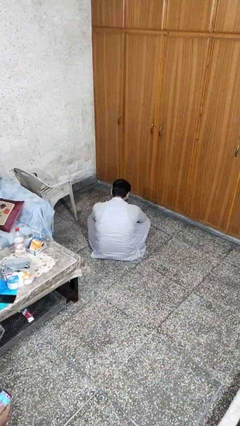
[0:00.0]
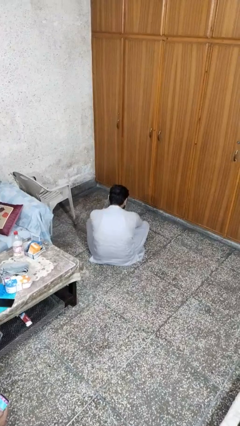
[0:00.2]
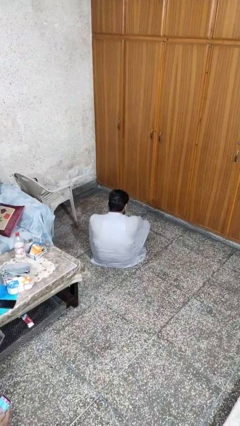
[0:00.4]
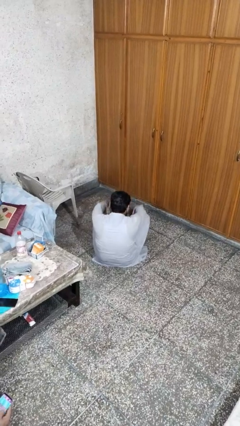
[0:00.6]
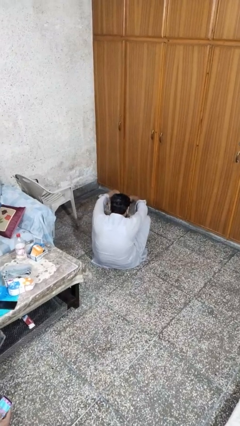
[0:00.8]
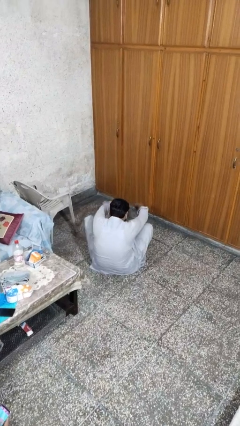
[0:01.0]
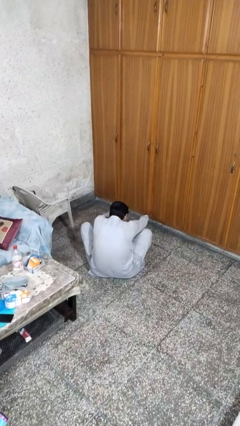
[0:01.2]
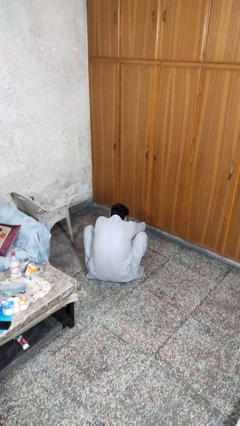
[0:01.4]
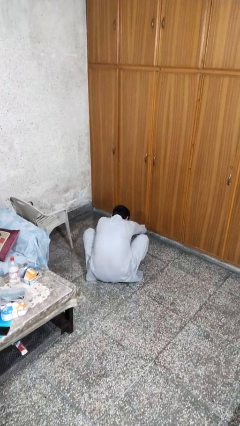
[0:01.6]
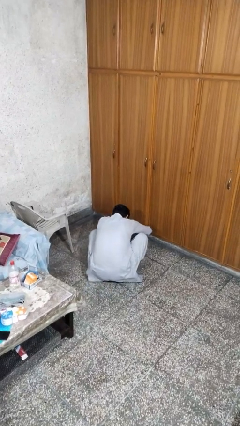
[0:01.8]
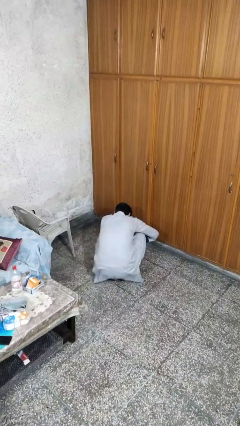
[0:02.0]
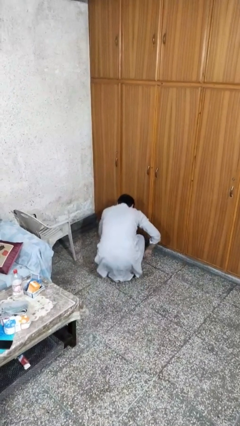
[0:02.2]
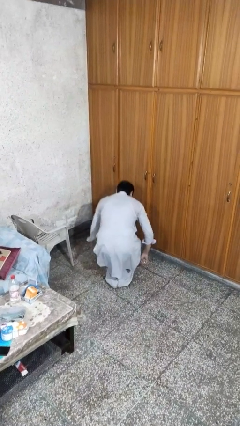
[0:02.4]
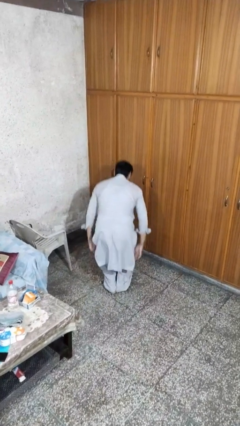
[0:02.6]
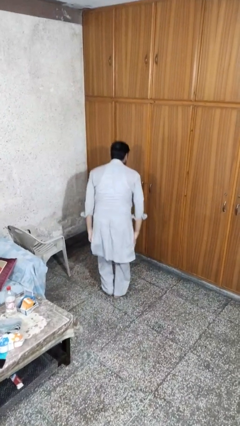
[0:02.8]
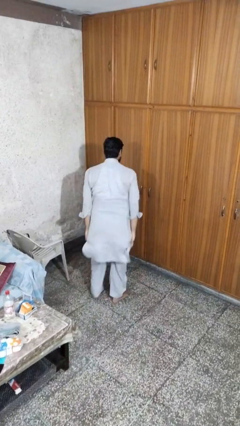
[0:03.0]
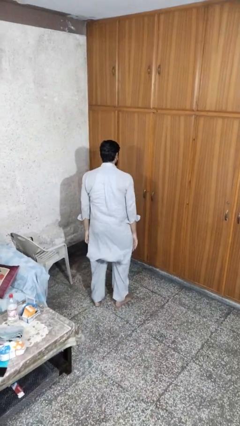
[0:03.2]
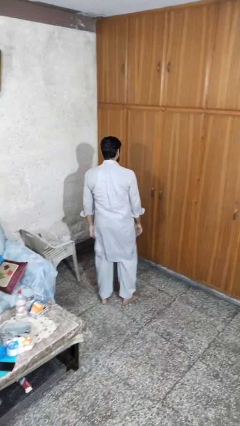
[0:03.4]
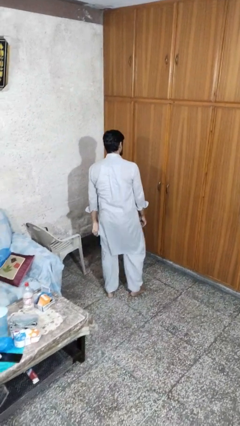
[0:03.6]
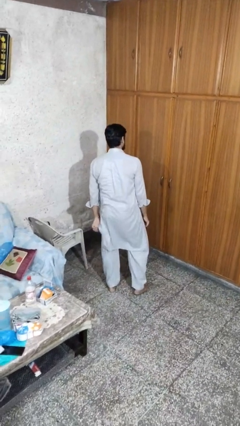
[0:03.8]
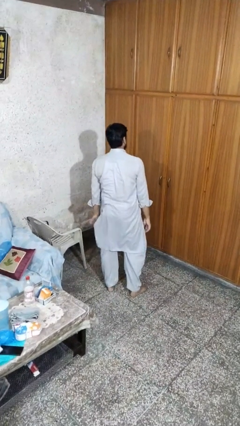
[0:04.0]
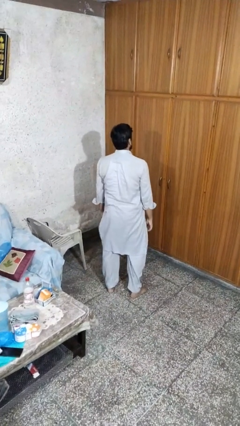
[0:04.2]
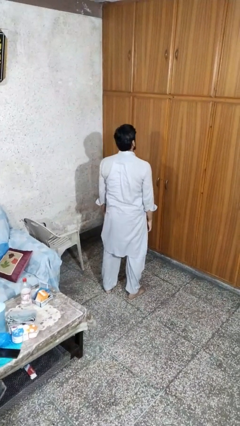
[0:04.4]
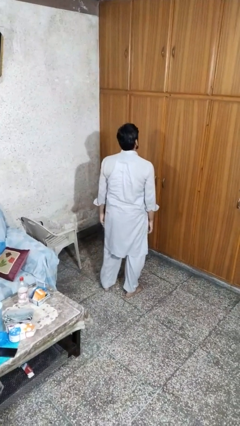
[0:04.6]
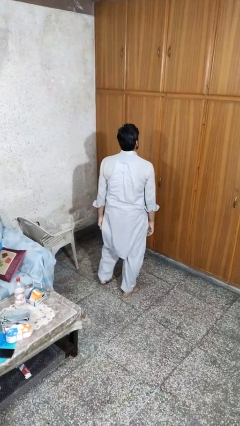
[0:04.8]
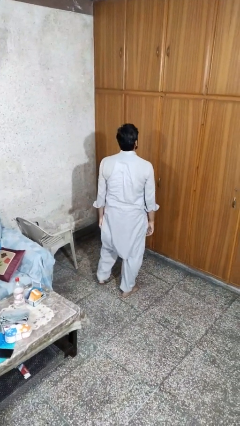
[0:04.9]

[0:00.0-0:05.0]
person stands up from floor

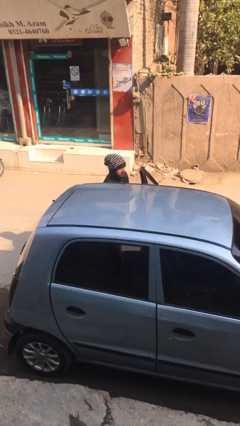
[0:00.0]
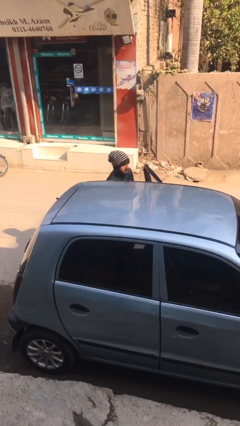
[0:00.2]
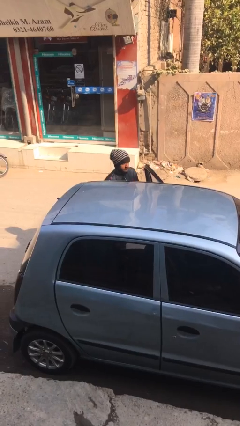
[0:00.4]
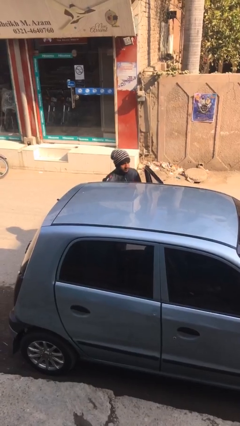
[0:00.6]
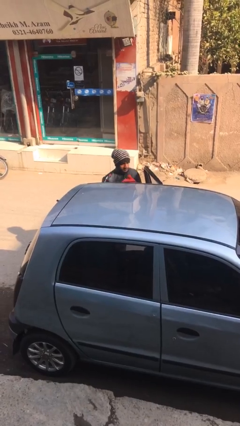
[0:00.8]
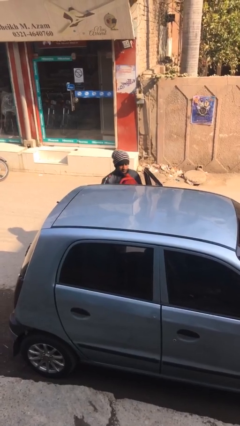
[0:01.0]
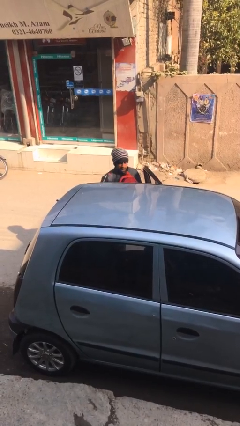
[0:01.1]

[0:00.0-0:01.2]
person unloads car

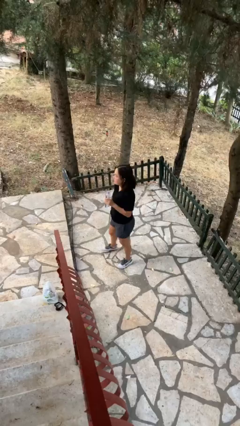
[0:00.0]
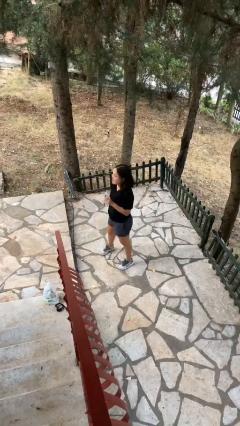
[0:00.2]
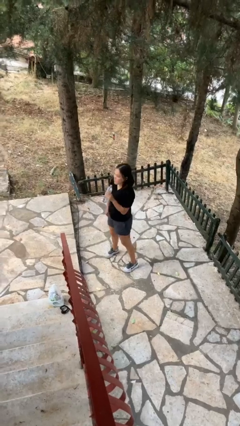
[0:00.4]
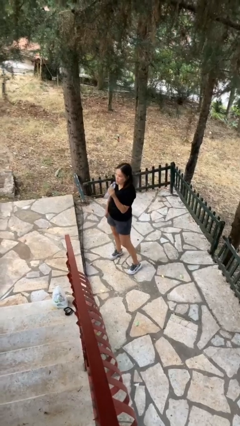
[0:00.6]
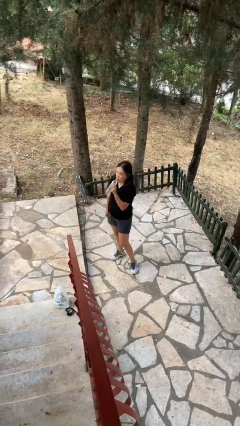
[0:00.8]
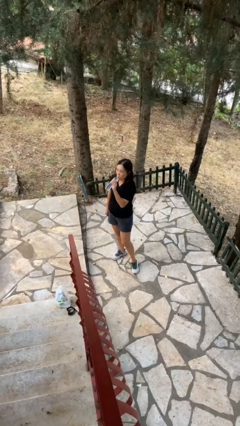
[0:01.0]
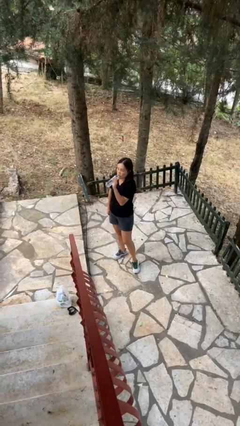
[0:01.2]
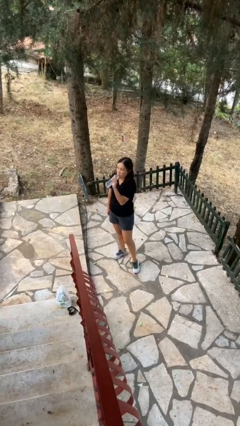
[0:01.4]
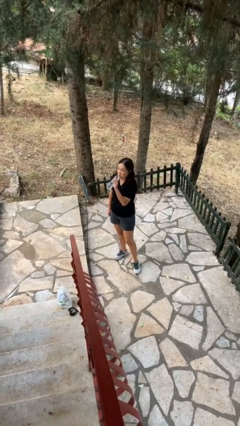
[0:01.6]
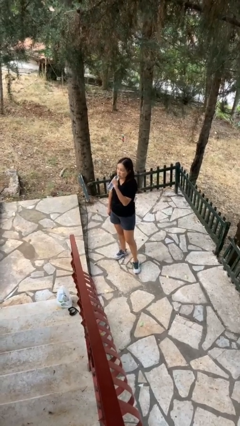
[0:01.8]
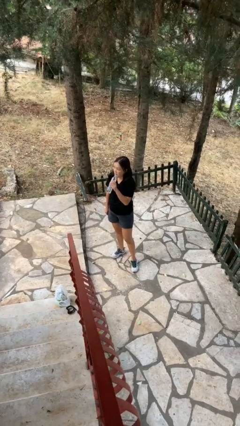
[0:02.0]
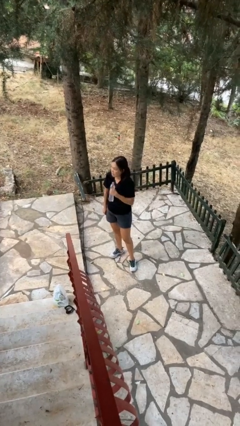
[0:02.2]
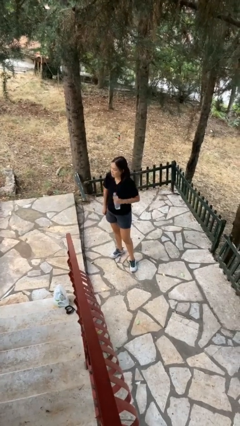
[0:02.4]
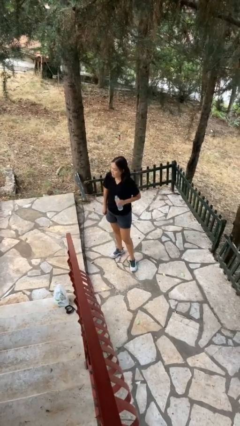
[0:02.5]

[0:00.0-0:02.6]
person drinks from bottle

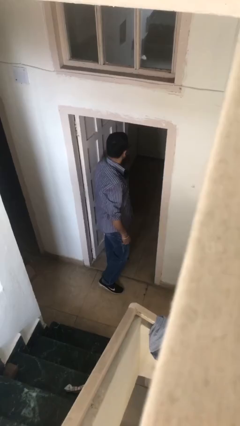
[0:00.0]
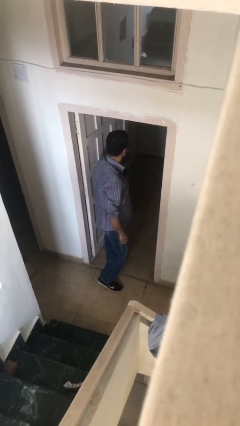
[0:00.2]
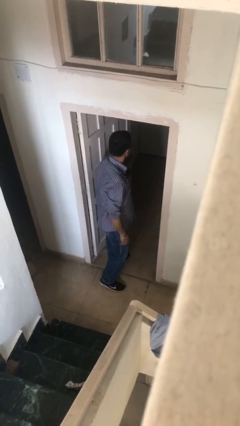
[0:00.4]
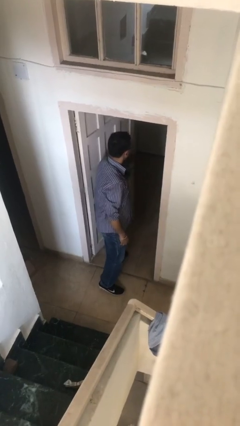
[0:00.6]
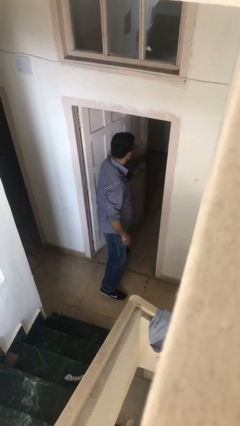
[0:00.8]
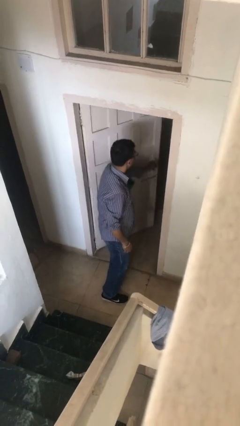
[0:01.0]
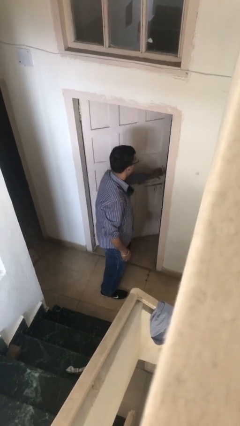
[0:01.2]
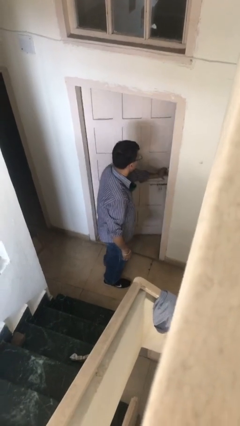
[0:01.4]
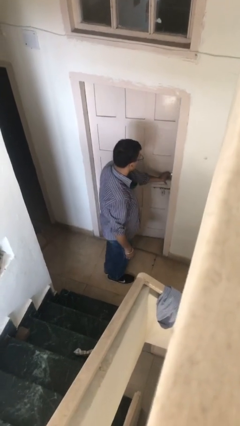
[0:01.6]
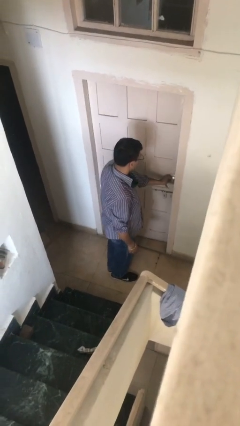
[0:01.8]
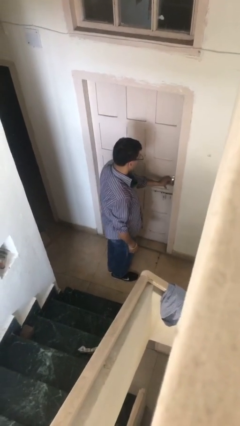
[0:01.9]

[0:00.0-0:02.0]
person closes facility door

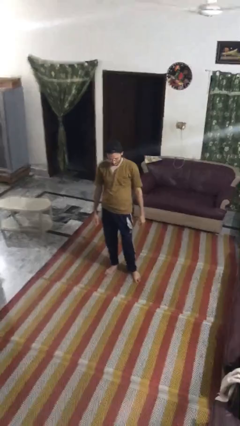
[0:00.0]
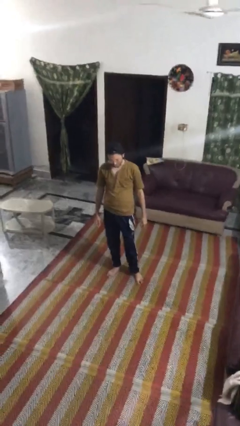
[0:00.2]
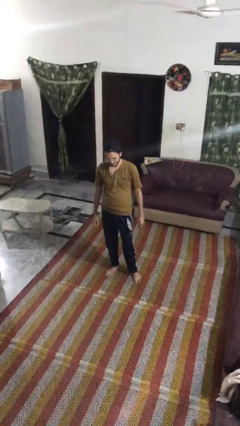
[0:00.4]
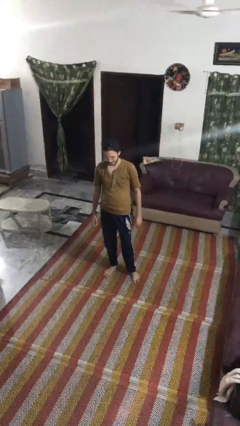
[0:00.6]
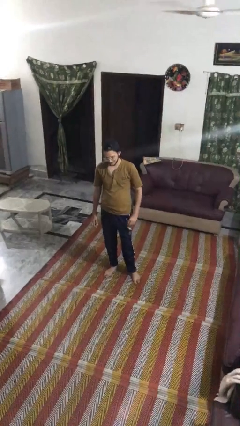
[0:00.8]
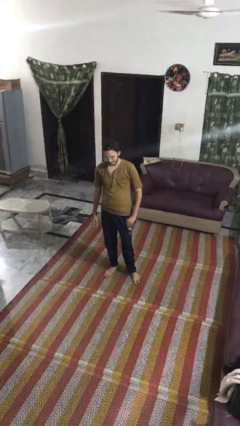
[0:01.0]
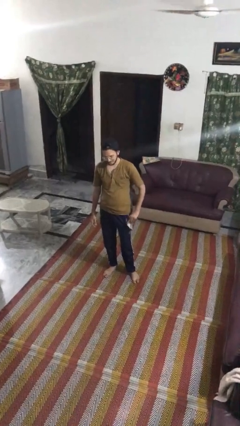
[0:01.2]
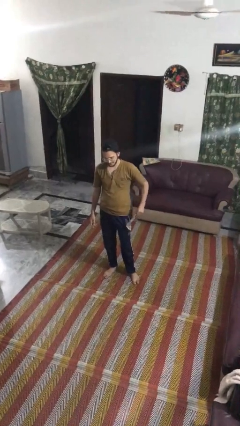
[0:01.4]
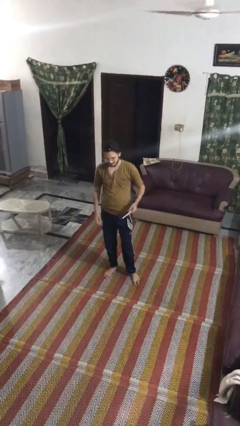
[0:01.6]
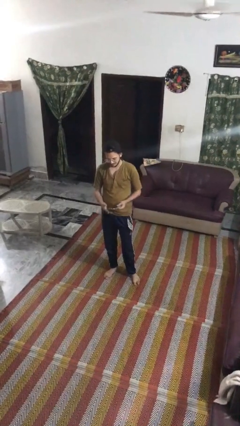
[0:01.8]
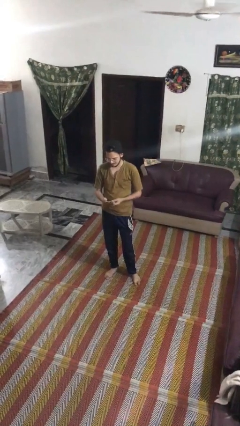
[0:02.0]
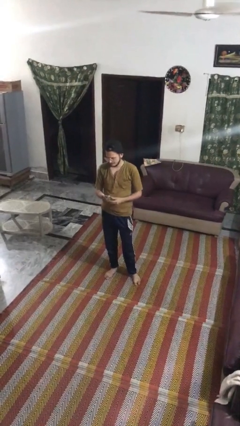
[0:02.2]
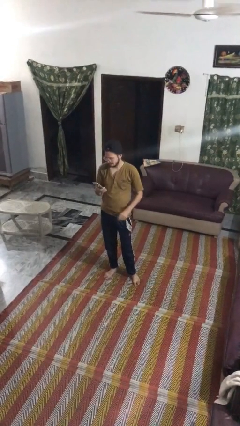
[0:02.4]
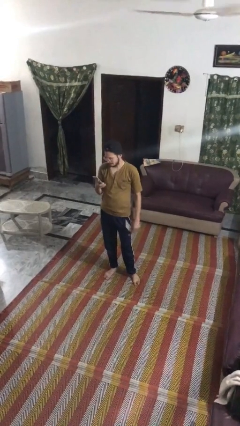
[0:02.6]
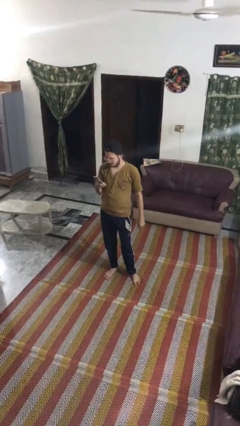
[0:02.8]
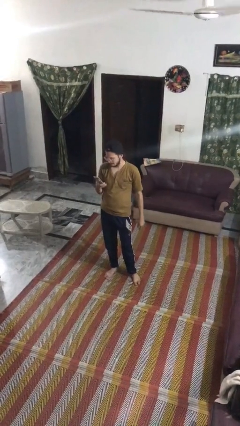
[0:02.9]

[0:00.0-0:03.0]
person takes phone from pocket

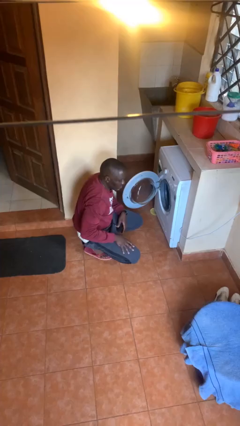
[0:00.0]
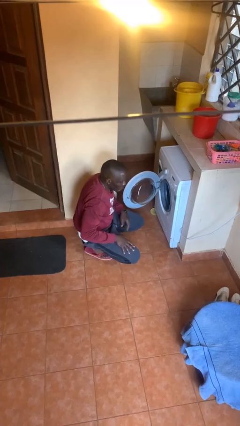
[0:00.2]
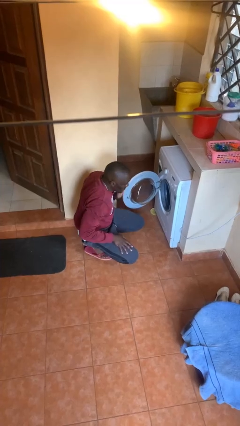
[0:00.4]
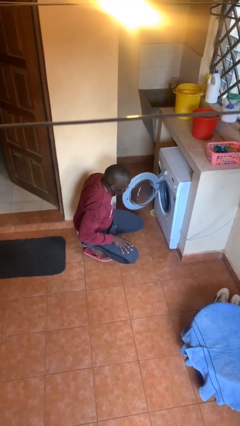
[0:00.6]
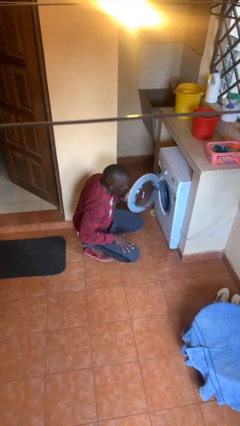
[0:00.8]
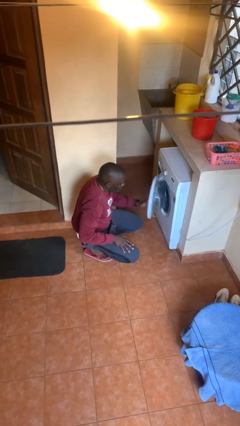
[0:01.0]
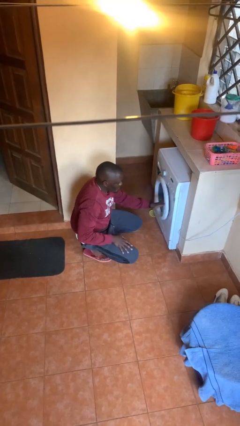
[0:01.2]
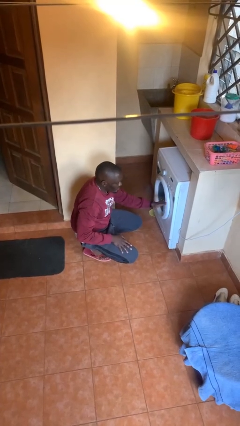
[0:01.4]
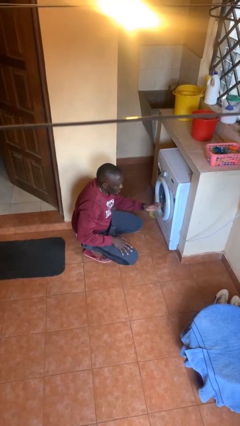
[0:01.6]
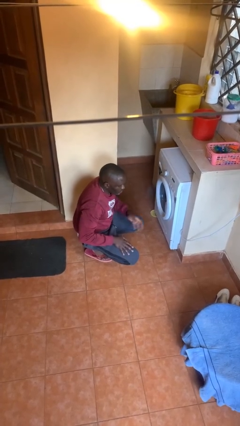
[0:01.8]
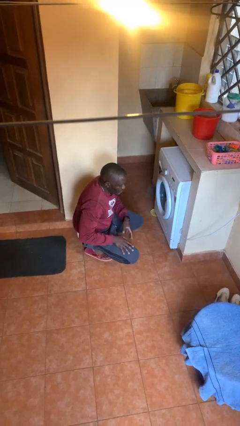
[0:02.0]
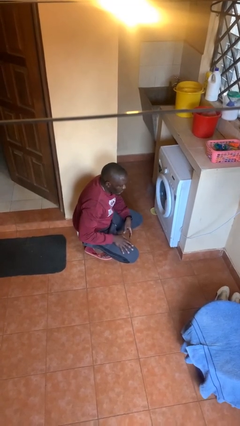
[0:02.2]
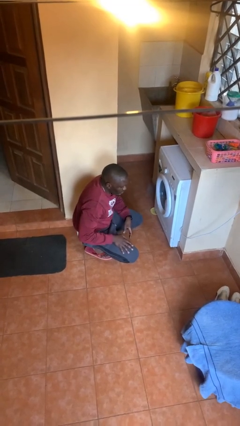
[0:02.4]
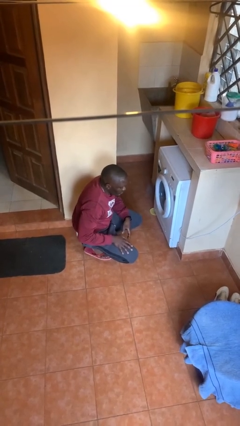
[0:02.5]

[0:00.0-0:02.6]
person closes clothes washer

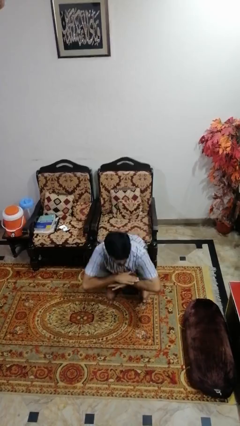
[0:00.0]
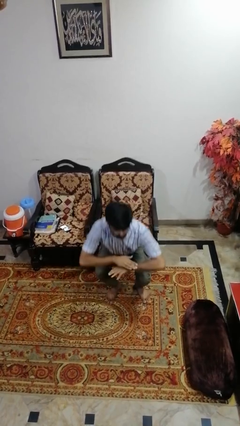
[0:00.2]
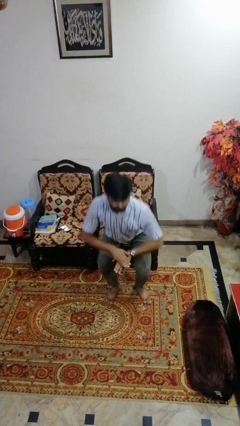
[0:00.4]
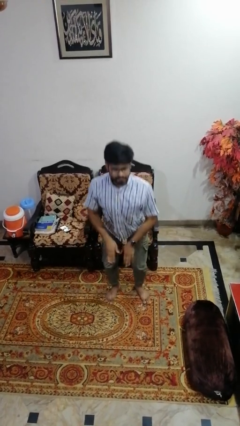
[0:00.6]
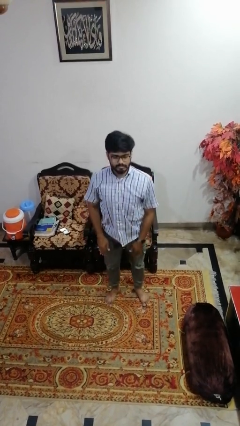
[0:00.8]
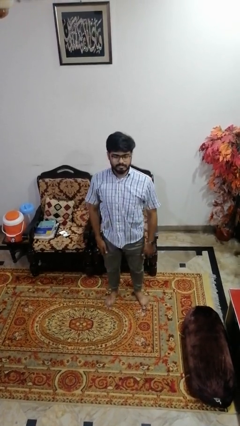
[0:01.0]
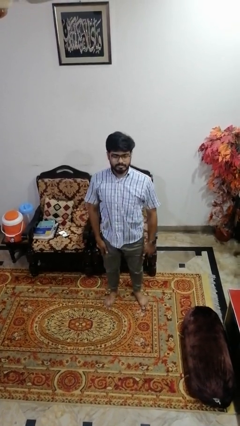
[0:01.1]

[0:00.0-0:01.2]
person stands up
